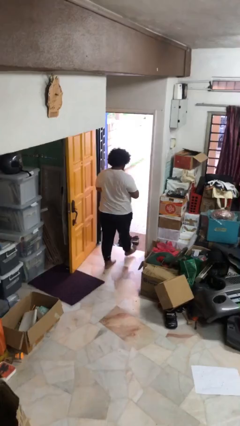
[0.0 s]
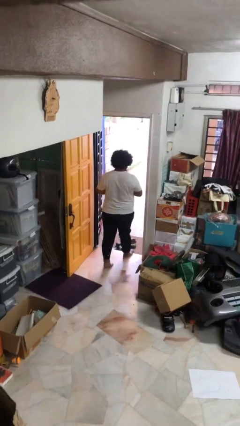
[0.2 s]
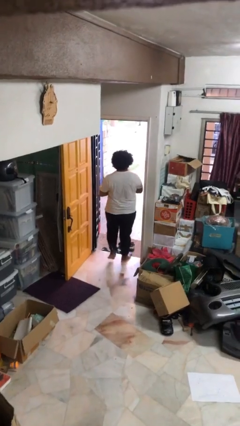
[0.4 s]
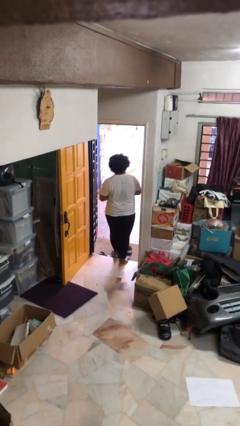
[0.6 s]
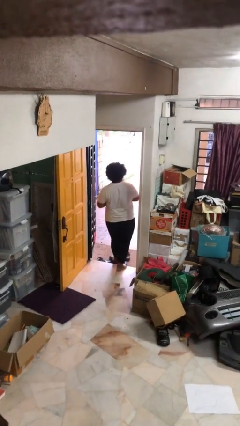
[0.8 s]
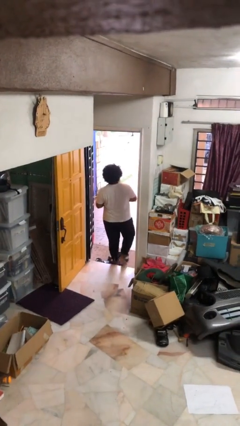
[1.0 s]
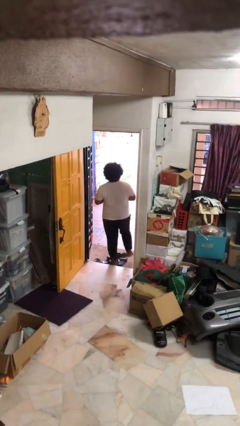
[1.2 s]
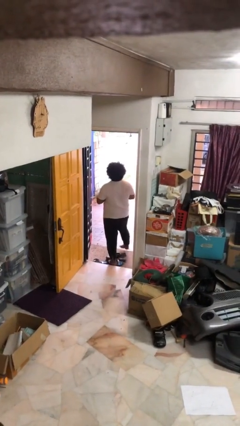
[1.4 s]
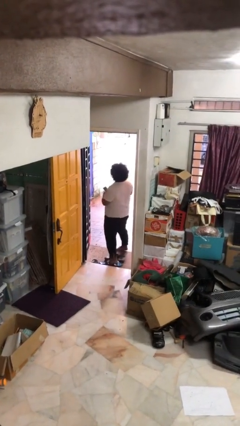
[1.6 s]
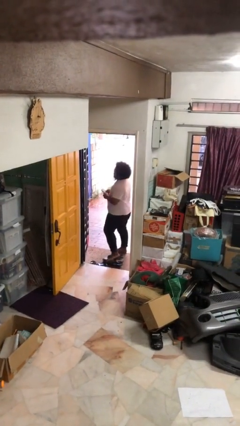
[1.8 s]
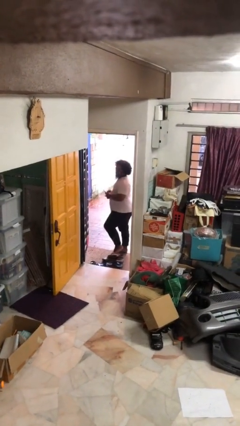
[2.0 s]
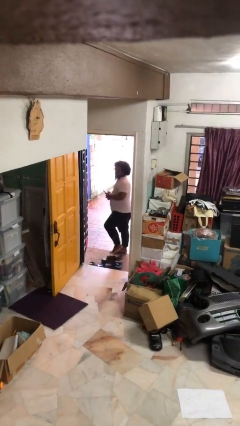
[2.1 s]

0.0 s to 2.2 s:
person exits scene through structure

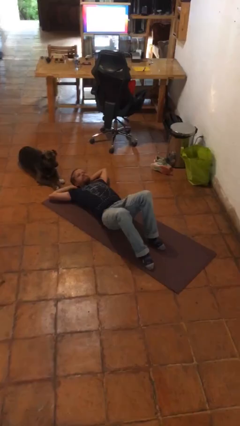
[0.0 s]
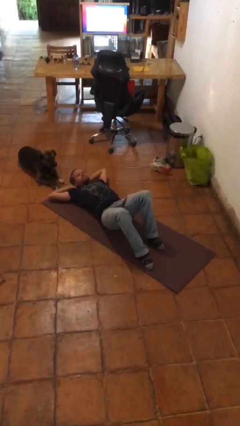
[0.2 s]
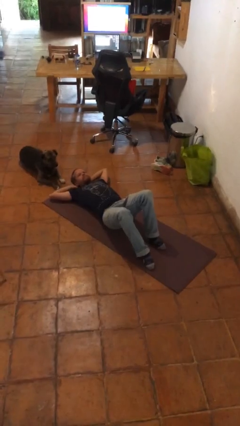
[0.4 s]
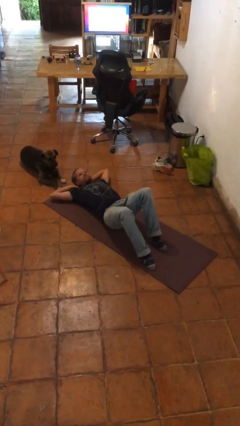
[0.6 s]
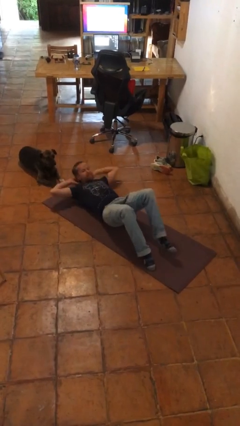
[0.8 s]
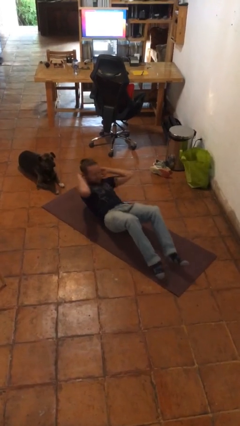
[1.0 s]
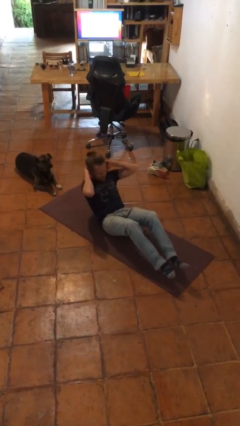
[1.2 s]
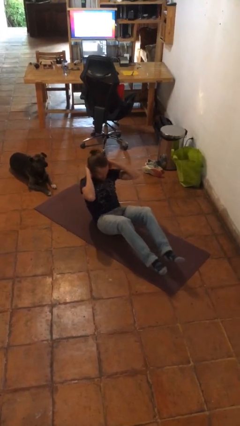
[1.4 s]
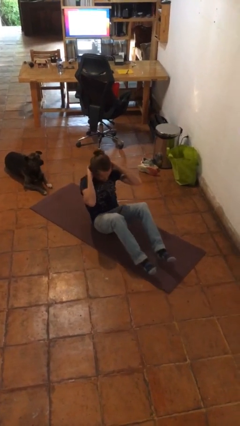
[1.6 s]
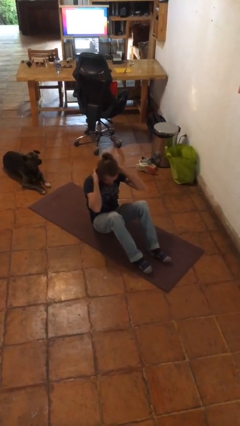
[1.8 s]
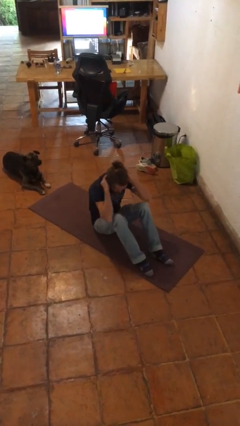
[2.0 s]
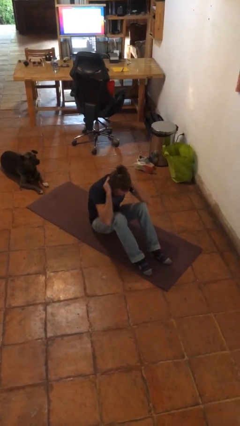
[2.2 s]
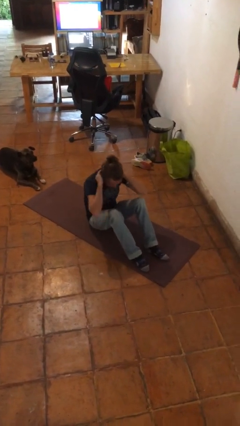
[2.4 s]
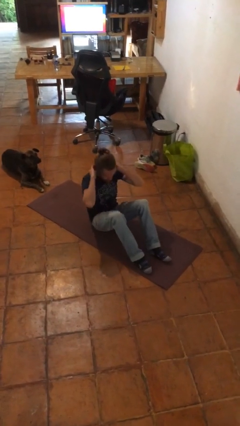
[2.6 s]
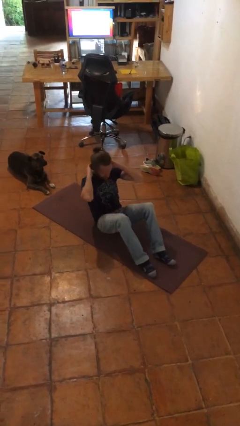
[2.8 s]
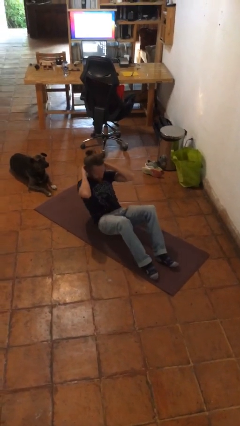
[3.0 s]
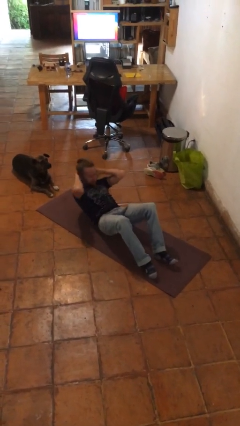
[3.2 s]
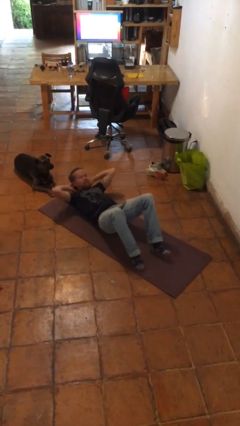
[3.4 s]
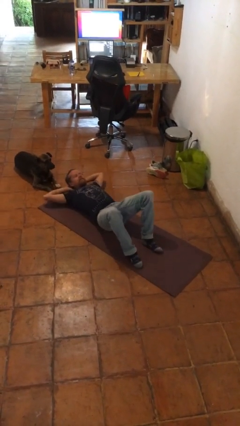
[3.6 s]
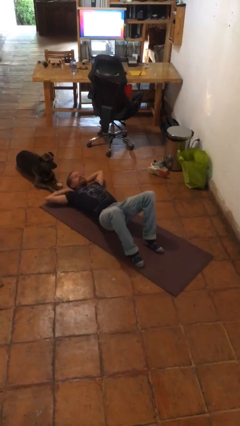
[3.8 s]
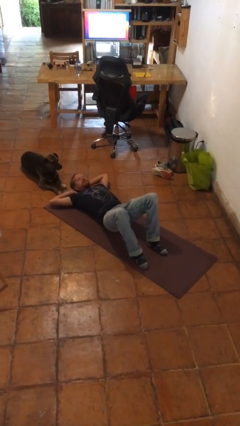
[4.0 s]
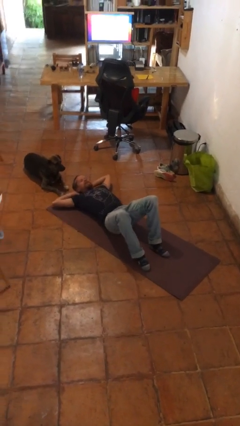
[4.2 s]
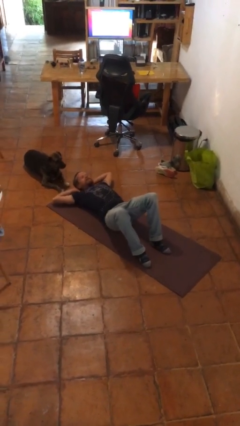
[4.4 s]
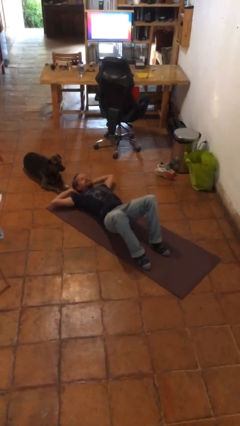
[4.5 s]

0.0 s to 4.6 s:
person exercises with situp

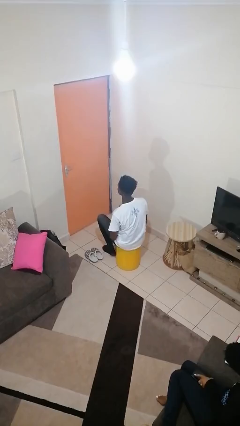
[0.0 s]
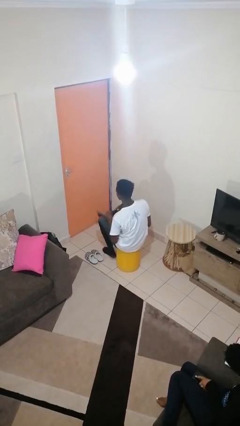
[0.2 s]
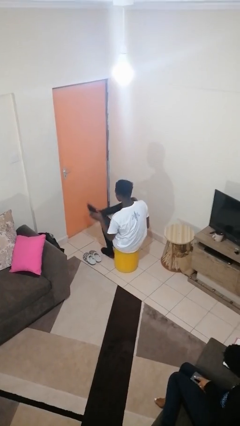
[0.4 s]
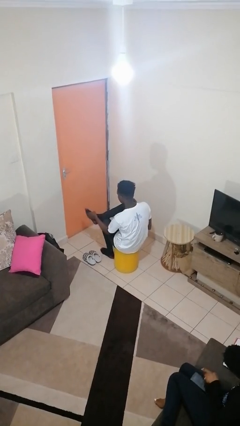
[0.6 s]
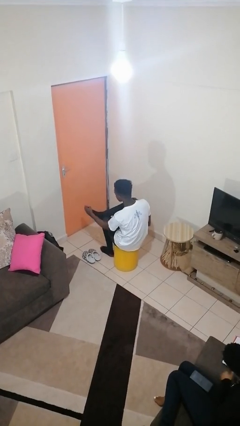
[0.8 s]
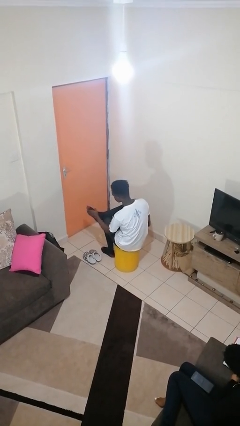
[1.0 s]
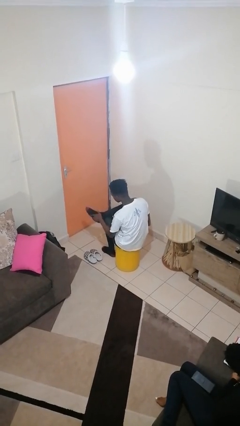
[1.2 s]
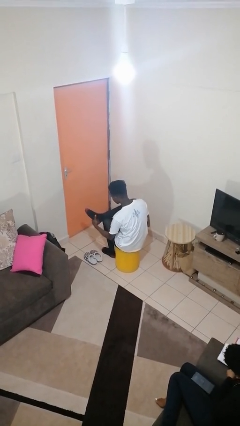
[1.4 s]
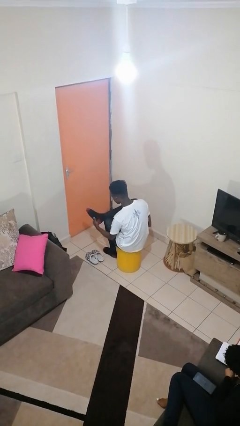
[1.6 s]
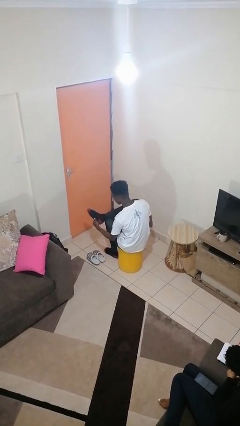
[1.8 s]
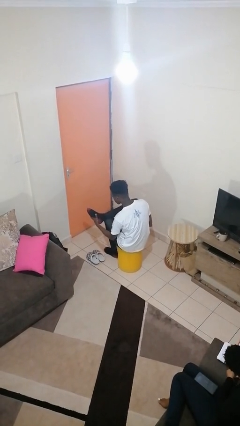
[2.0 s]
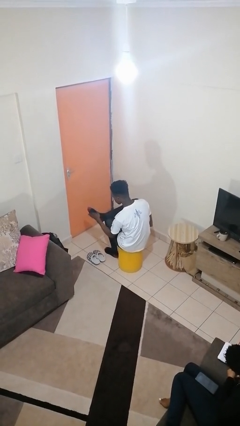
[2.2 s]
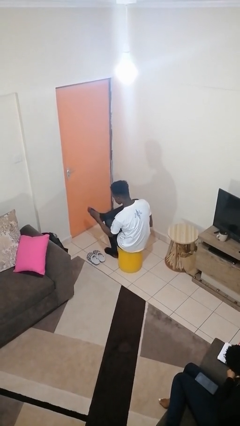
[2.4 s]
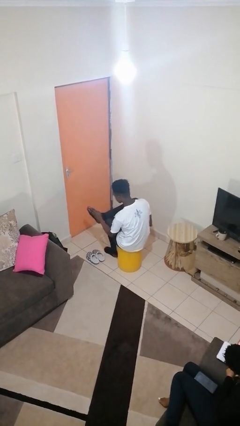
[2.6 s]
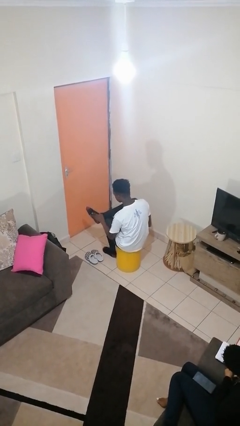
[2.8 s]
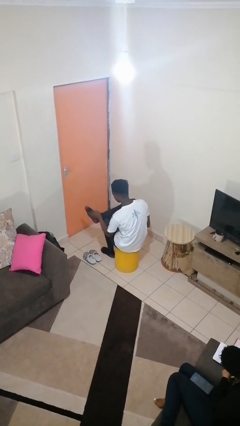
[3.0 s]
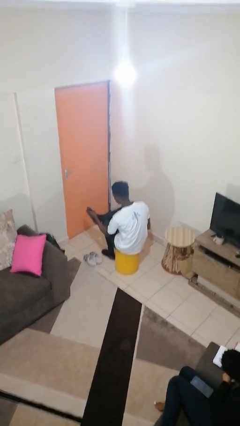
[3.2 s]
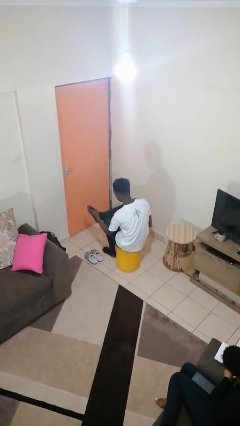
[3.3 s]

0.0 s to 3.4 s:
person rubs foot

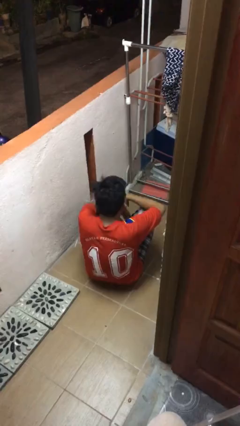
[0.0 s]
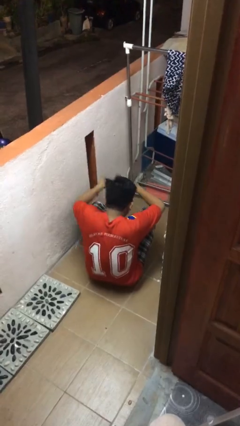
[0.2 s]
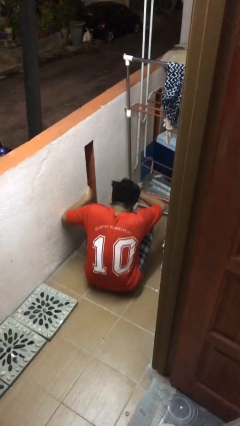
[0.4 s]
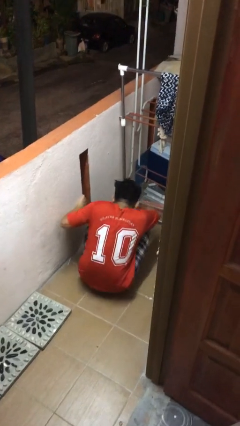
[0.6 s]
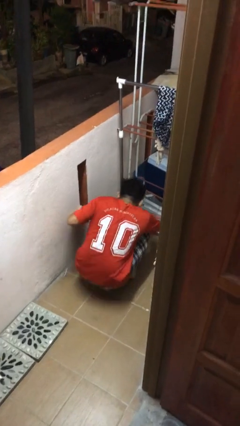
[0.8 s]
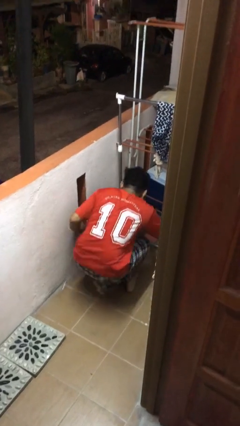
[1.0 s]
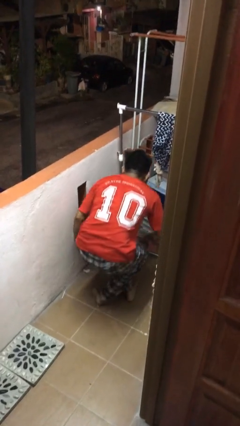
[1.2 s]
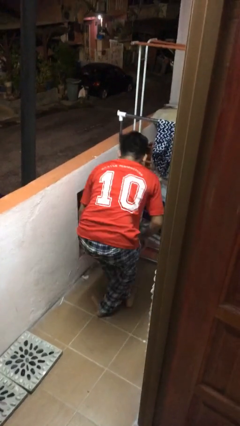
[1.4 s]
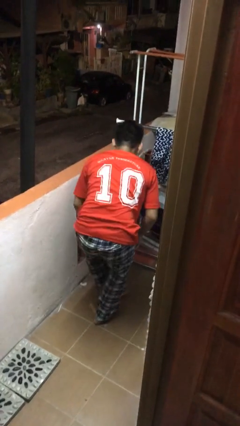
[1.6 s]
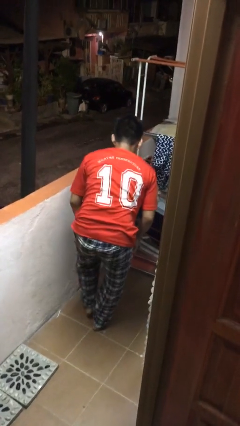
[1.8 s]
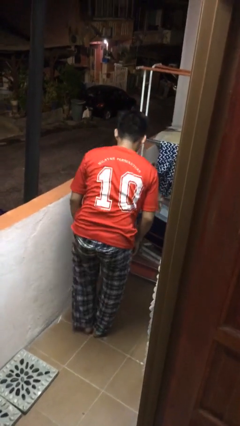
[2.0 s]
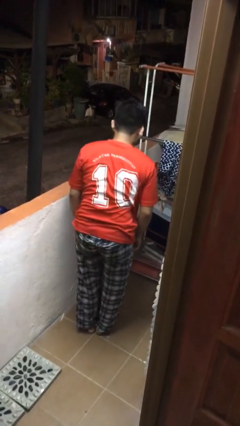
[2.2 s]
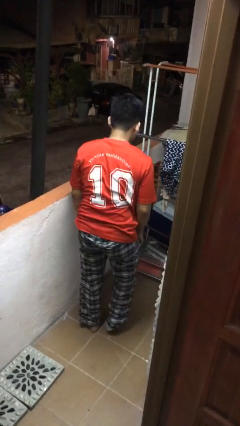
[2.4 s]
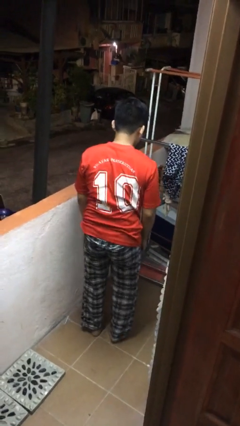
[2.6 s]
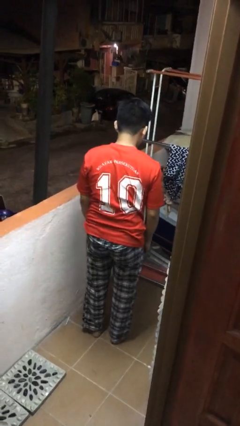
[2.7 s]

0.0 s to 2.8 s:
person stands up from floor

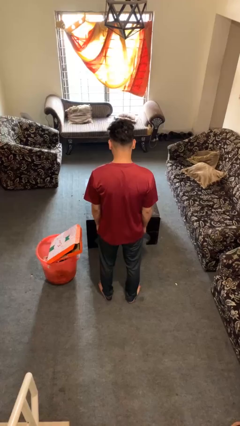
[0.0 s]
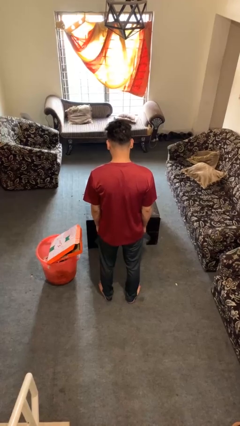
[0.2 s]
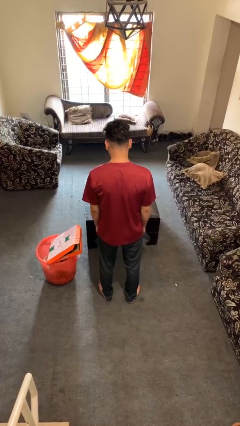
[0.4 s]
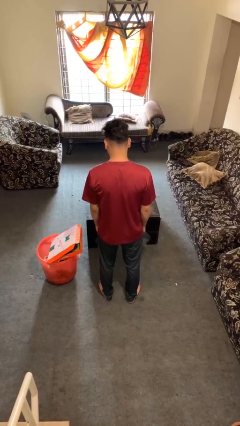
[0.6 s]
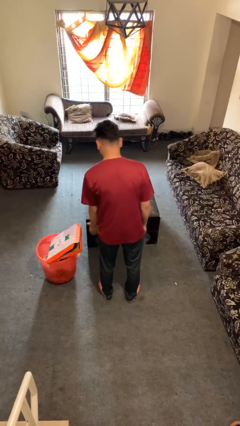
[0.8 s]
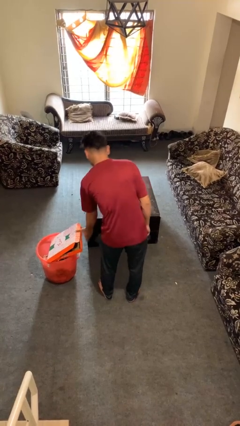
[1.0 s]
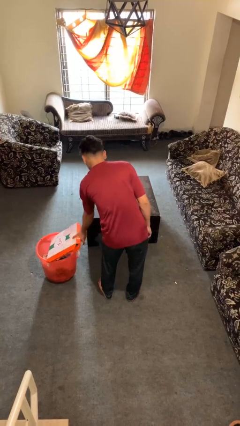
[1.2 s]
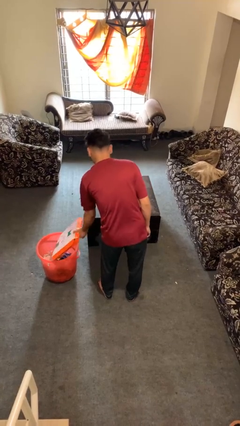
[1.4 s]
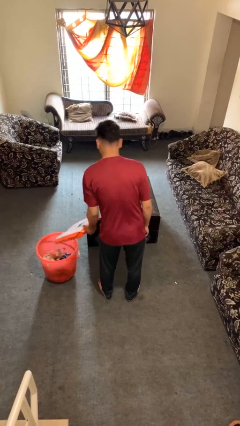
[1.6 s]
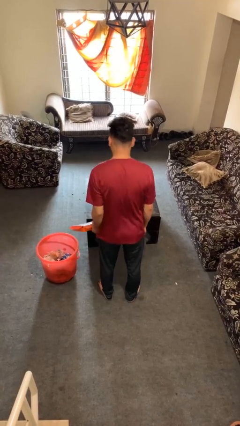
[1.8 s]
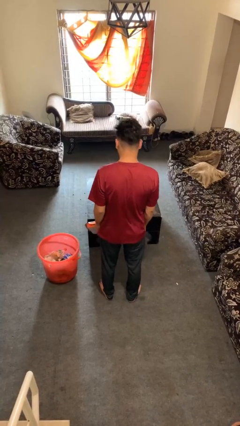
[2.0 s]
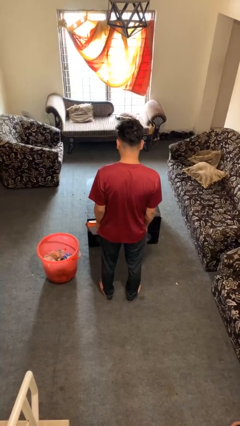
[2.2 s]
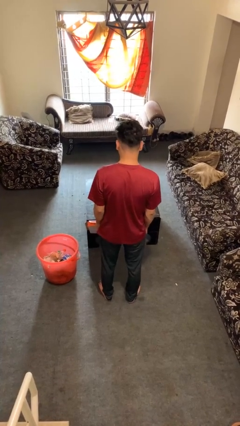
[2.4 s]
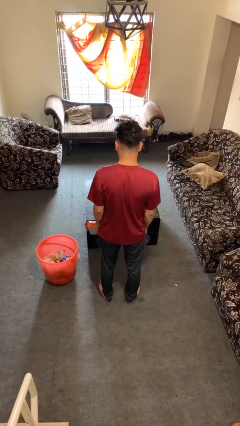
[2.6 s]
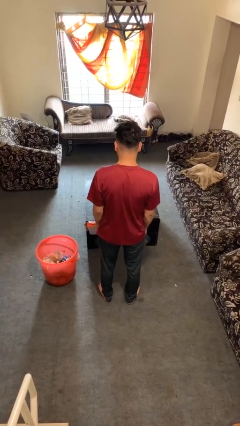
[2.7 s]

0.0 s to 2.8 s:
person takes object from basket

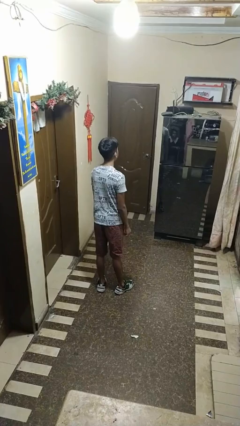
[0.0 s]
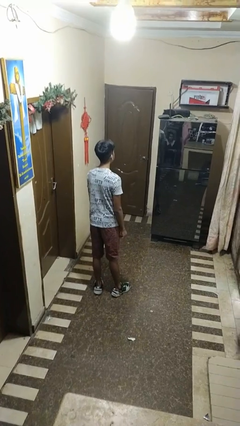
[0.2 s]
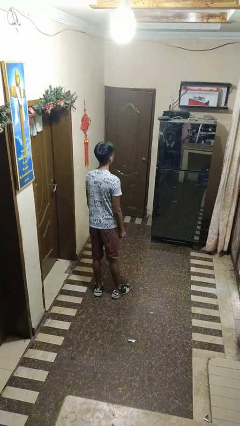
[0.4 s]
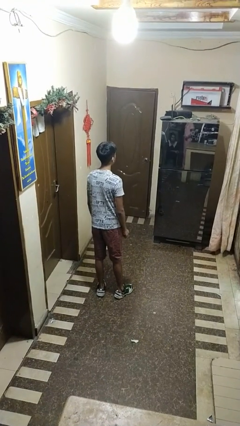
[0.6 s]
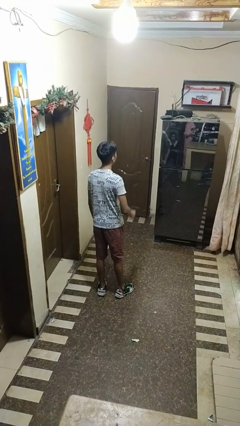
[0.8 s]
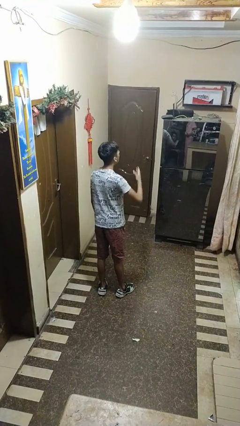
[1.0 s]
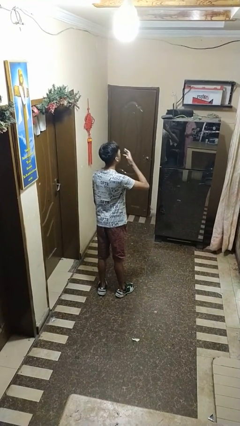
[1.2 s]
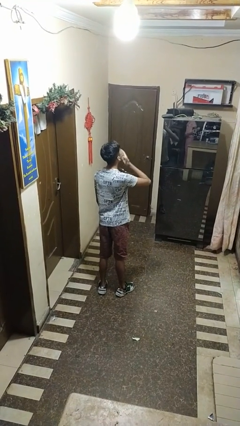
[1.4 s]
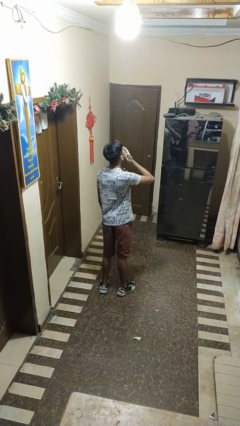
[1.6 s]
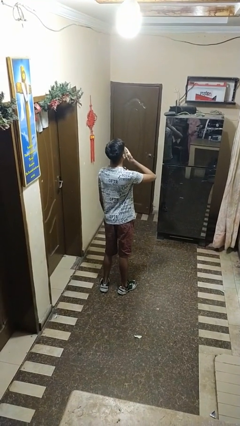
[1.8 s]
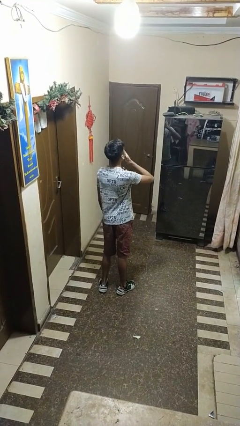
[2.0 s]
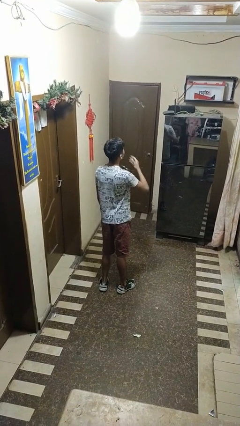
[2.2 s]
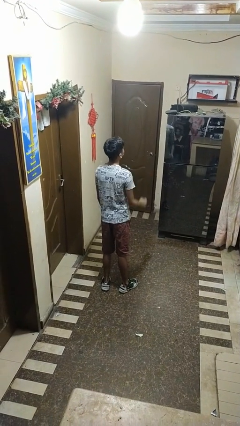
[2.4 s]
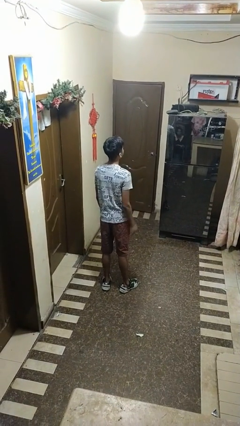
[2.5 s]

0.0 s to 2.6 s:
person yawns
